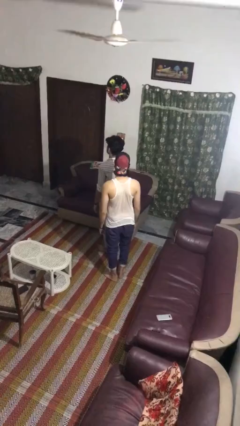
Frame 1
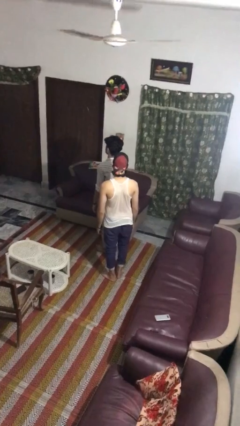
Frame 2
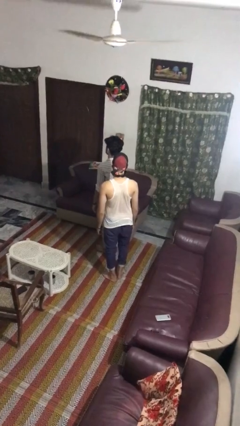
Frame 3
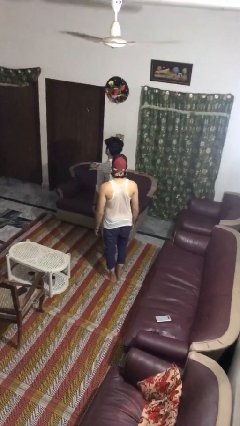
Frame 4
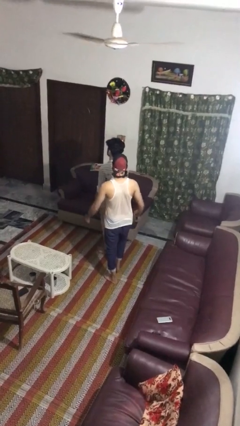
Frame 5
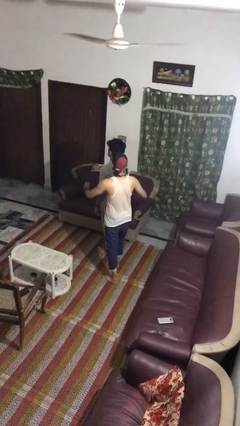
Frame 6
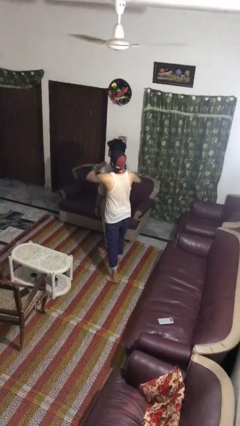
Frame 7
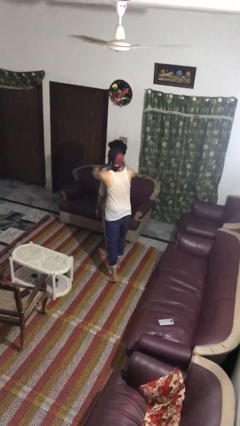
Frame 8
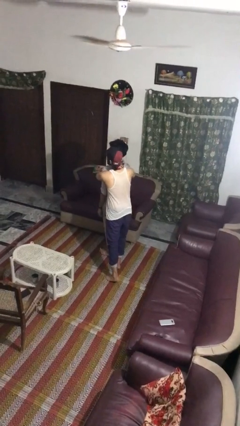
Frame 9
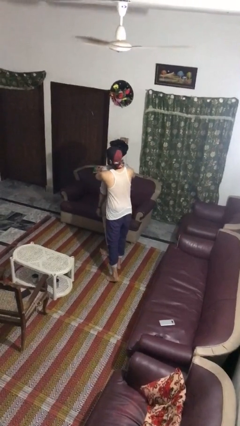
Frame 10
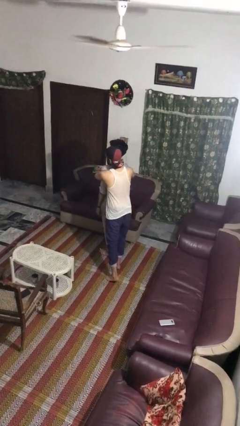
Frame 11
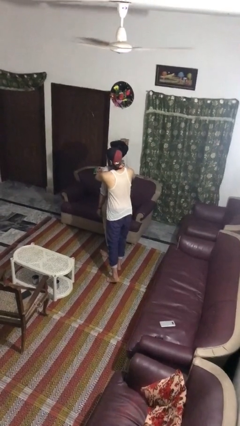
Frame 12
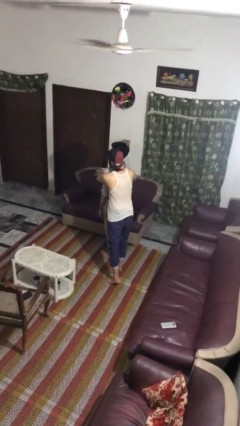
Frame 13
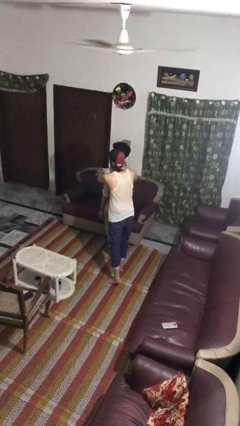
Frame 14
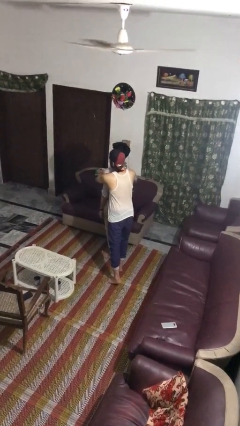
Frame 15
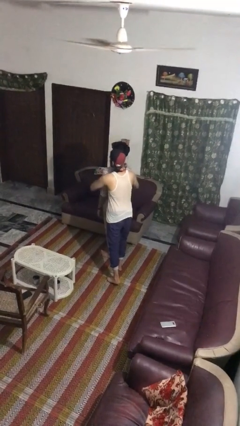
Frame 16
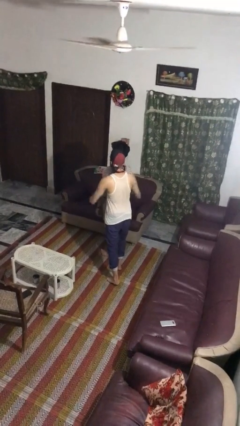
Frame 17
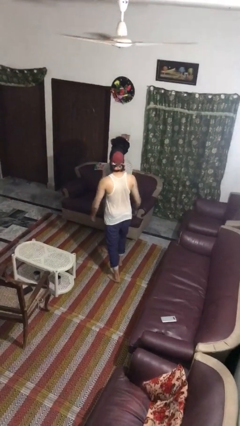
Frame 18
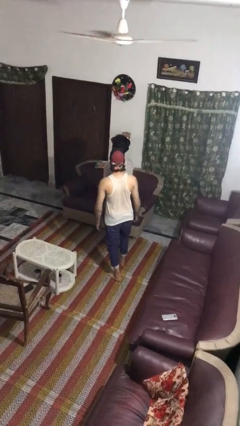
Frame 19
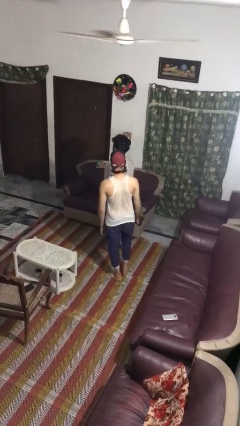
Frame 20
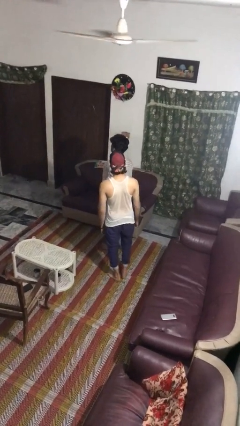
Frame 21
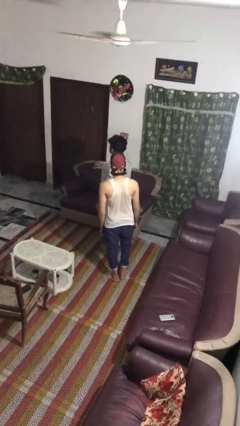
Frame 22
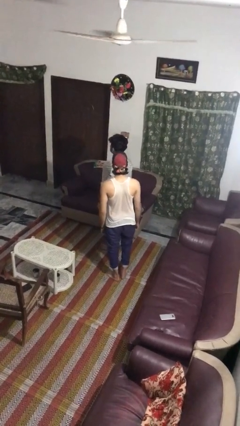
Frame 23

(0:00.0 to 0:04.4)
person hugs person from behind

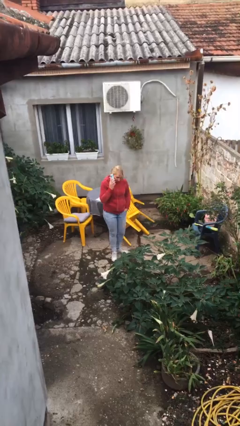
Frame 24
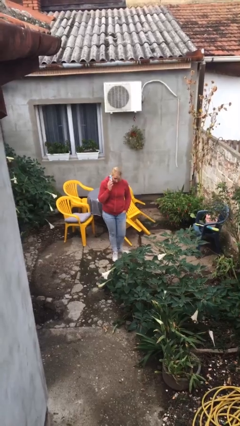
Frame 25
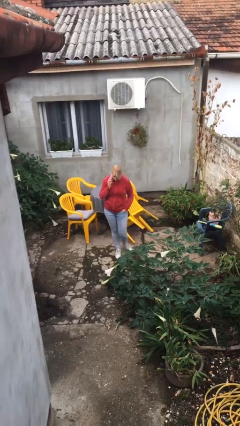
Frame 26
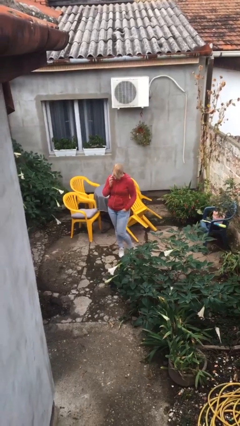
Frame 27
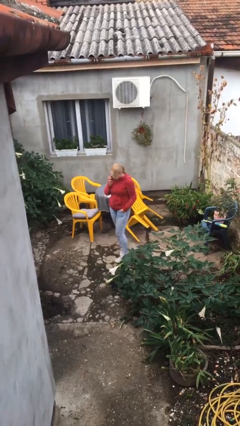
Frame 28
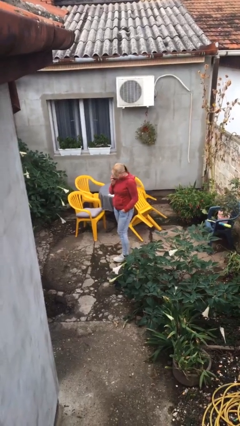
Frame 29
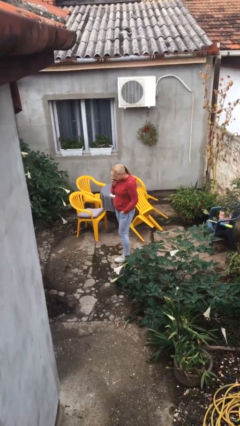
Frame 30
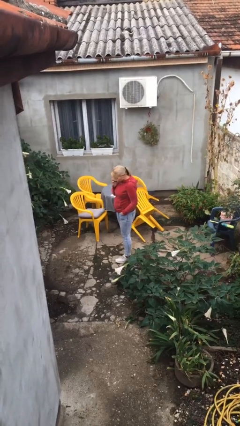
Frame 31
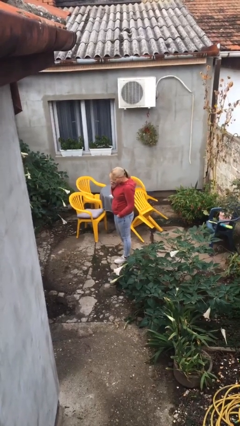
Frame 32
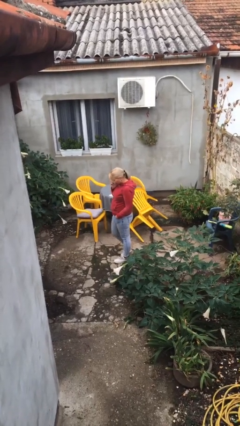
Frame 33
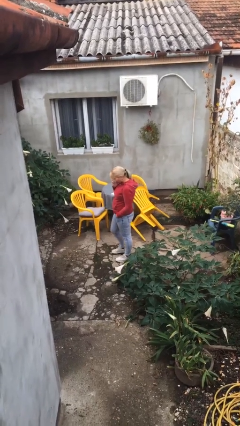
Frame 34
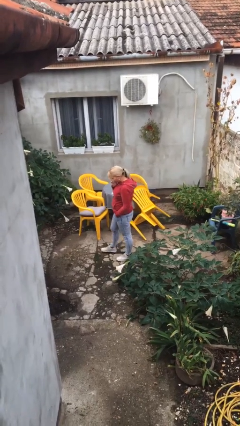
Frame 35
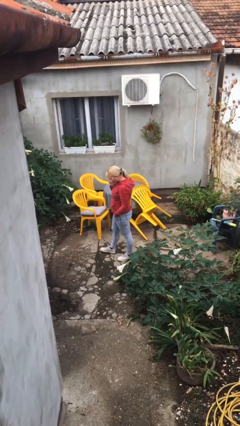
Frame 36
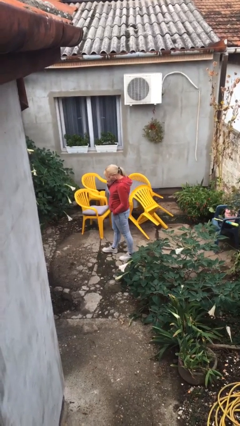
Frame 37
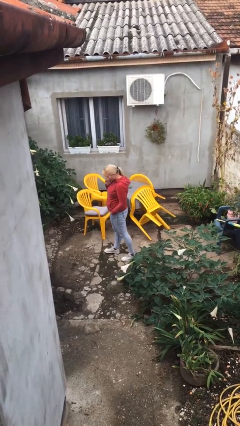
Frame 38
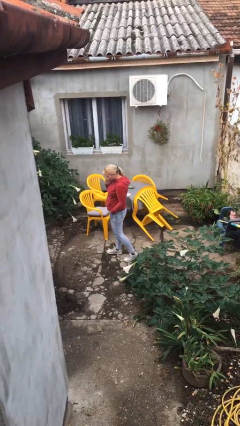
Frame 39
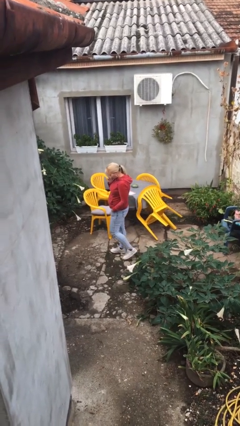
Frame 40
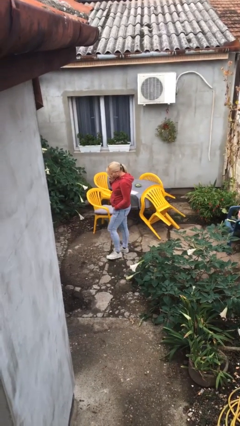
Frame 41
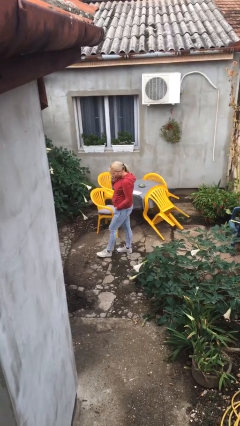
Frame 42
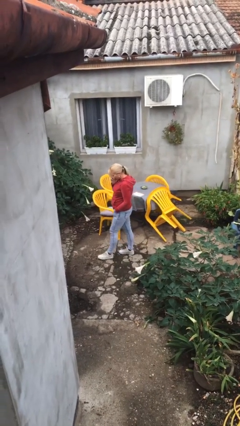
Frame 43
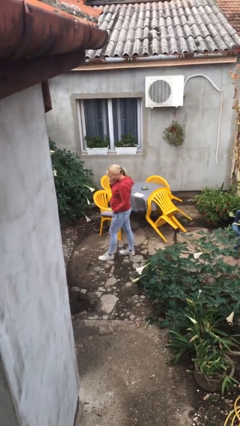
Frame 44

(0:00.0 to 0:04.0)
person talks on phone

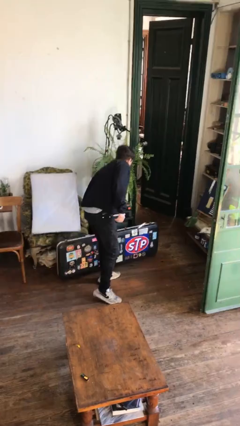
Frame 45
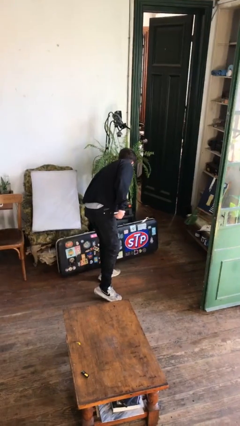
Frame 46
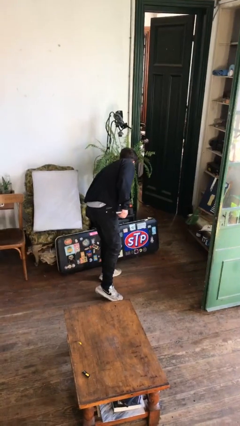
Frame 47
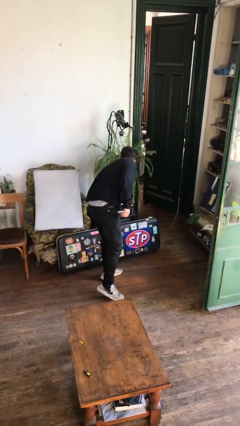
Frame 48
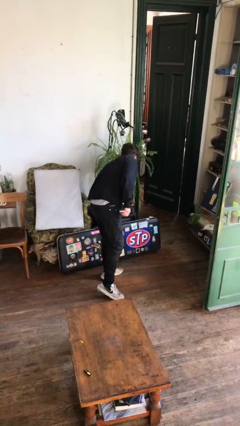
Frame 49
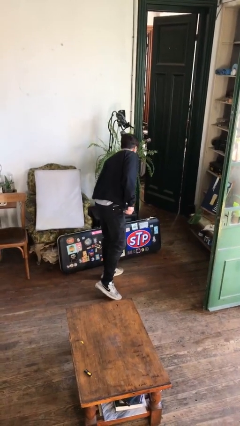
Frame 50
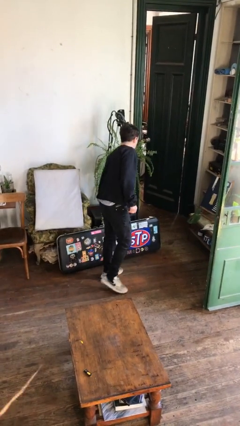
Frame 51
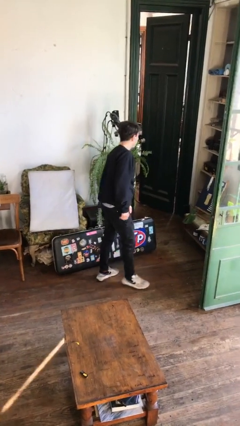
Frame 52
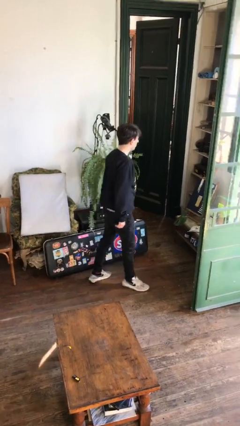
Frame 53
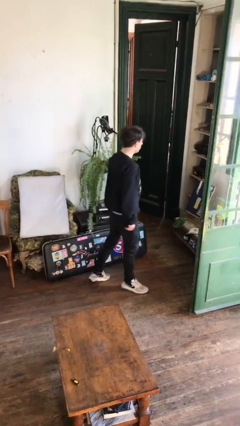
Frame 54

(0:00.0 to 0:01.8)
person puts down object on floor

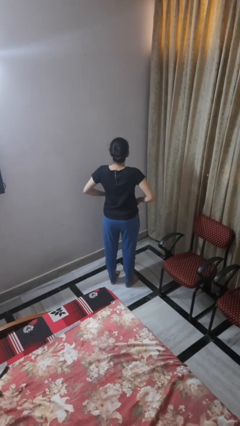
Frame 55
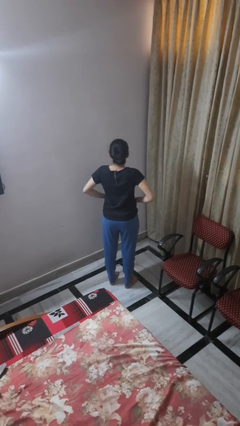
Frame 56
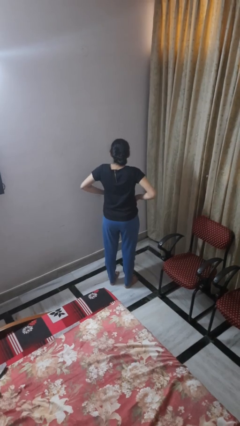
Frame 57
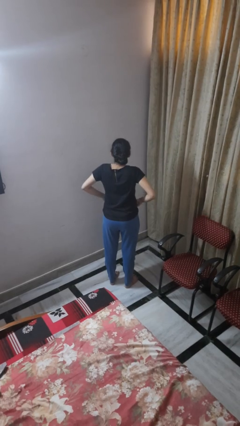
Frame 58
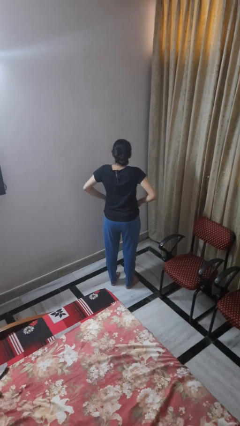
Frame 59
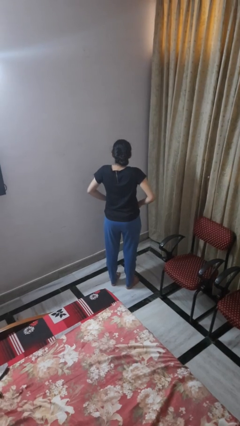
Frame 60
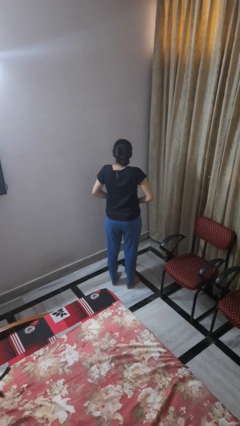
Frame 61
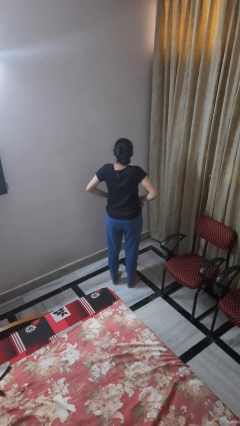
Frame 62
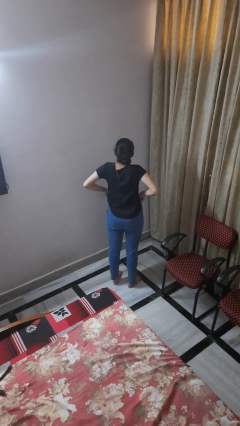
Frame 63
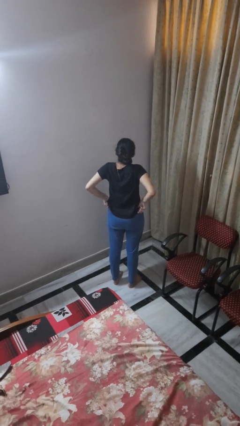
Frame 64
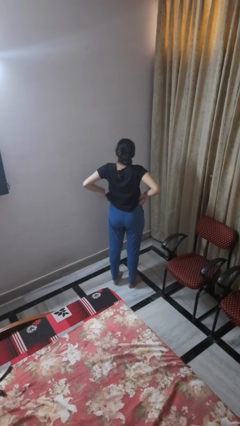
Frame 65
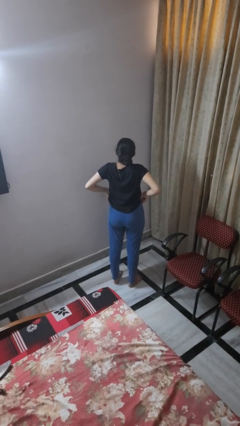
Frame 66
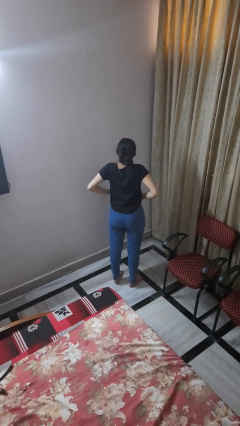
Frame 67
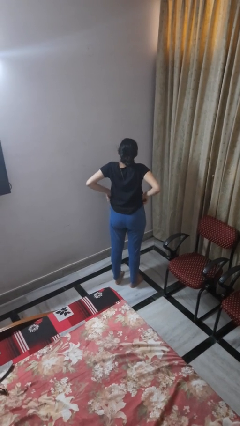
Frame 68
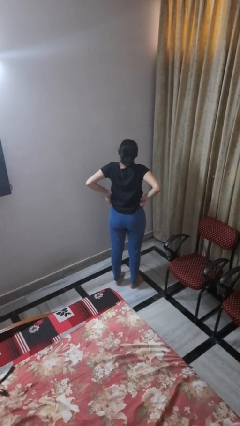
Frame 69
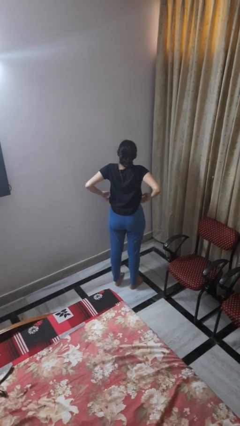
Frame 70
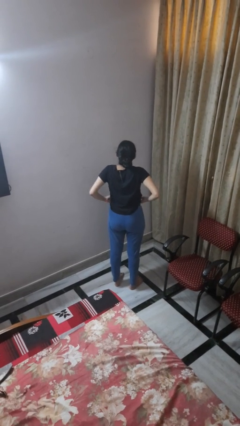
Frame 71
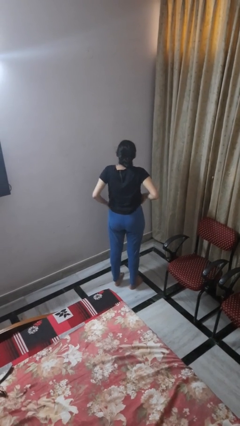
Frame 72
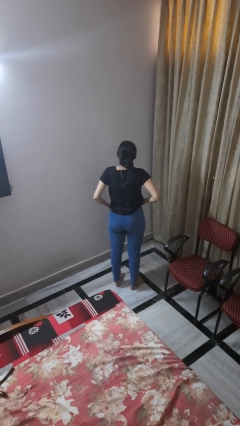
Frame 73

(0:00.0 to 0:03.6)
person hikes up pants

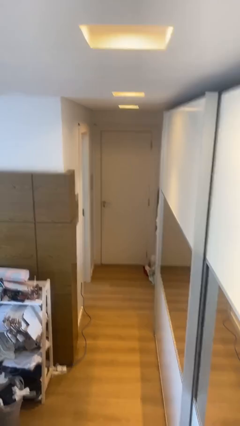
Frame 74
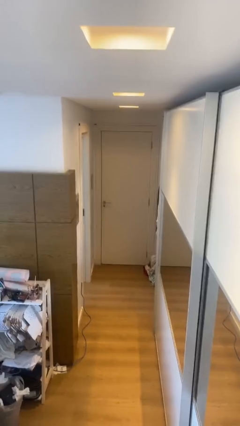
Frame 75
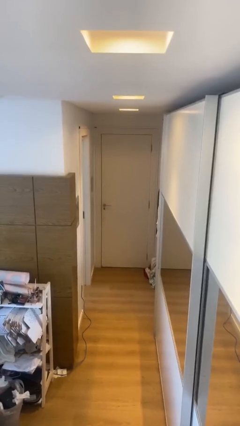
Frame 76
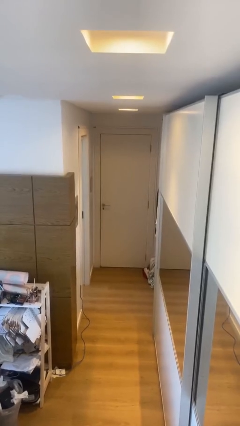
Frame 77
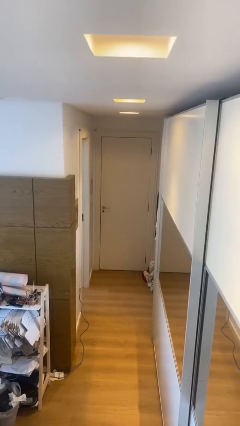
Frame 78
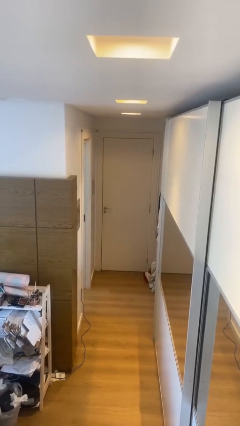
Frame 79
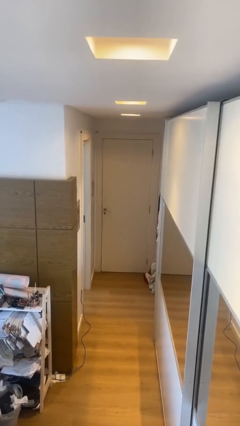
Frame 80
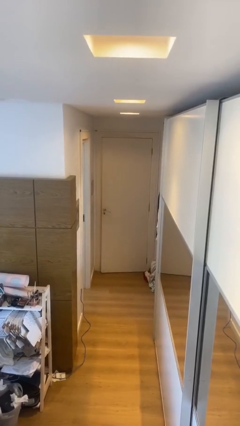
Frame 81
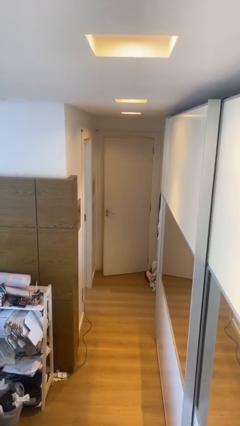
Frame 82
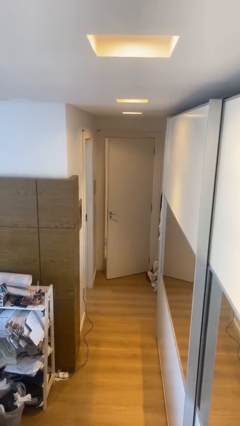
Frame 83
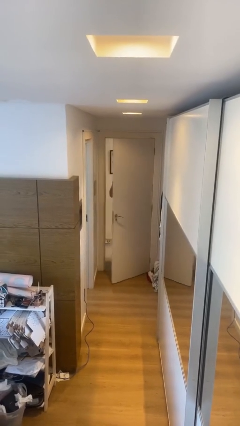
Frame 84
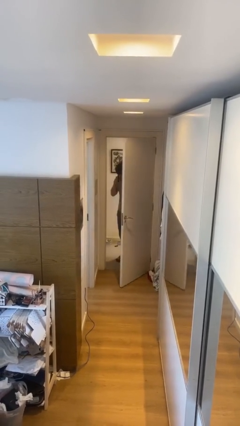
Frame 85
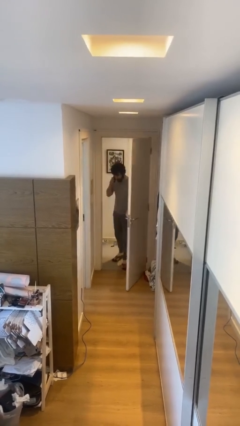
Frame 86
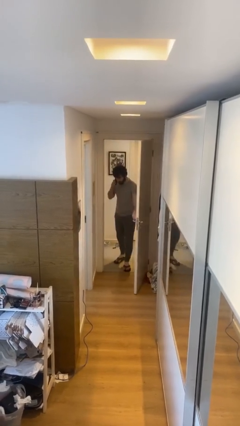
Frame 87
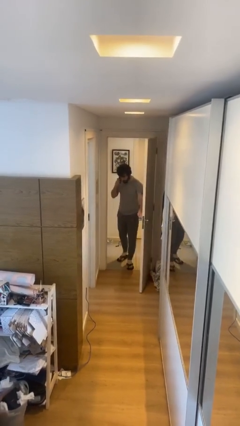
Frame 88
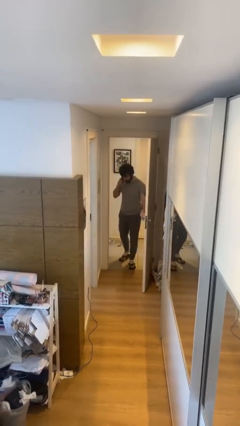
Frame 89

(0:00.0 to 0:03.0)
person opens facility door

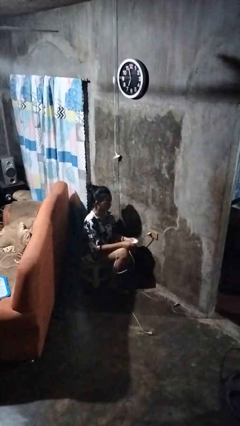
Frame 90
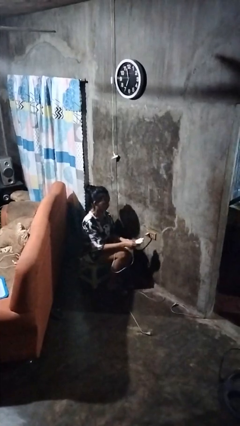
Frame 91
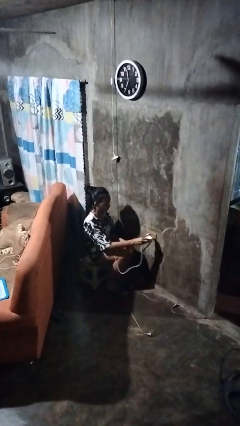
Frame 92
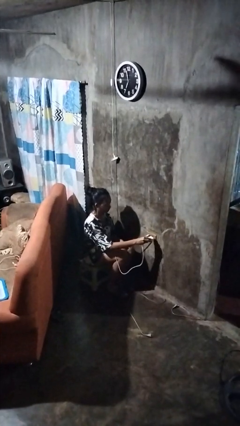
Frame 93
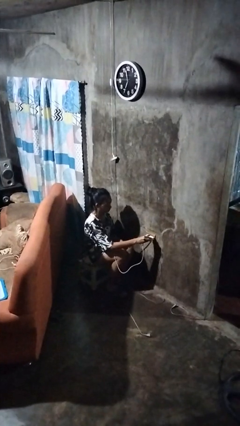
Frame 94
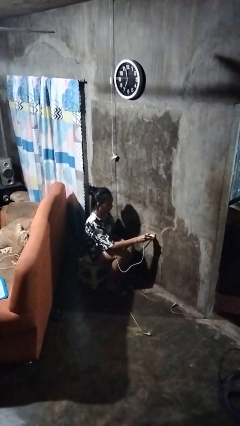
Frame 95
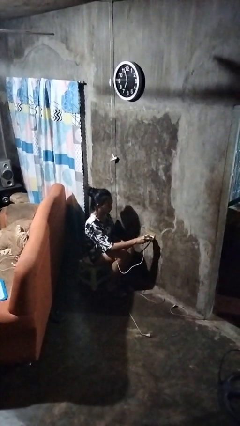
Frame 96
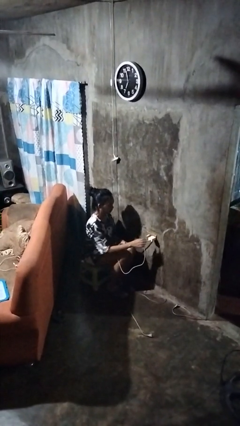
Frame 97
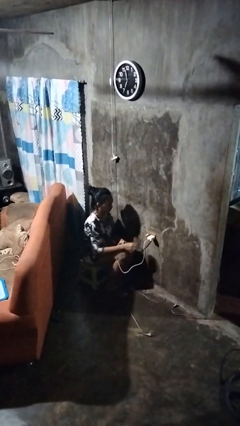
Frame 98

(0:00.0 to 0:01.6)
person plugs into electrical socket
